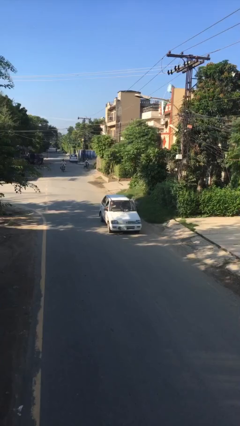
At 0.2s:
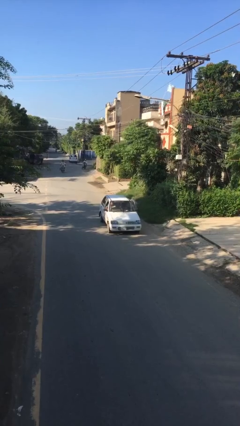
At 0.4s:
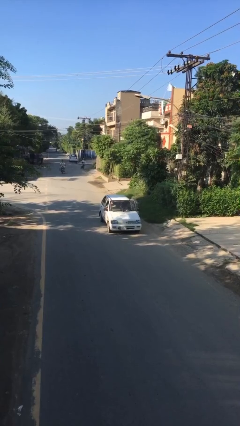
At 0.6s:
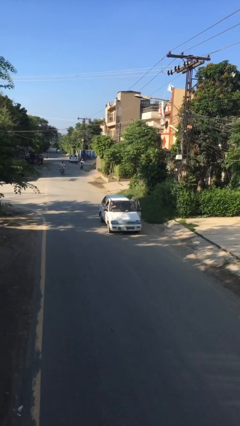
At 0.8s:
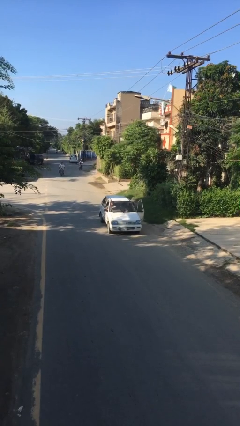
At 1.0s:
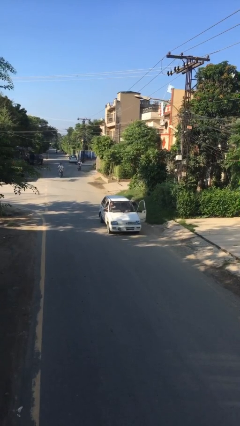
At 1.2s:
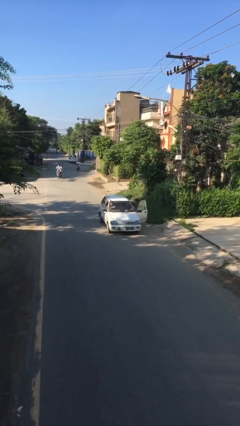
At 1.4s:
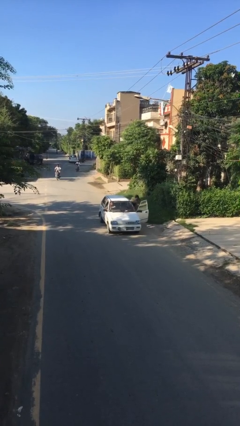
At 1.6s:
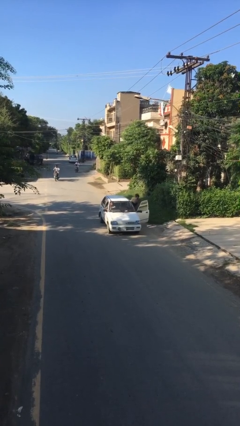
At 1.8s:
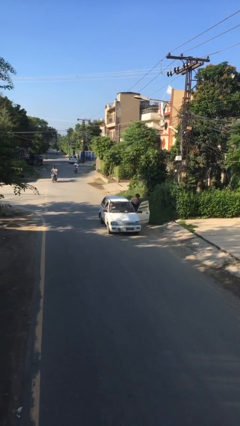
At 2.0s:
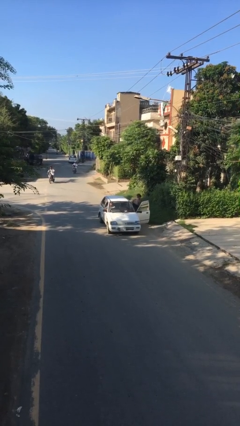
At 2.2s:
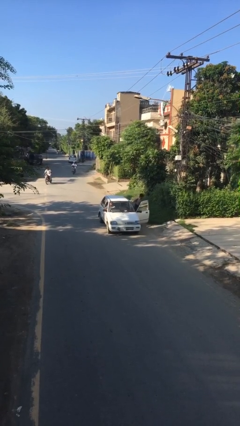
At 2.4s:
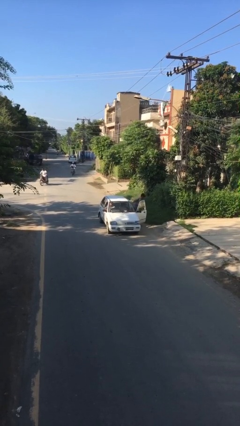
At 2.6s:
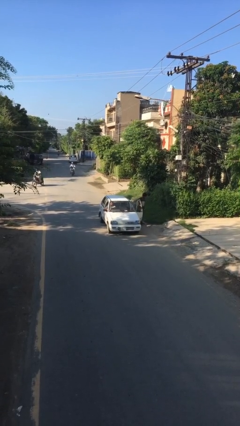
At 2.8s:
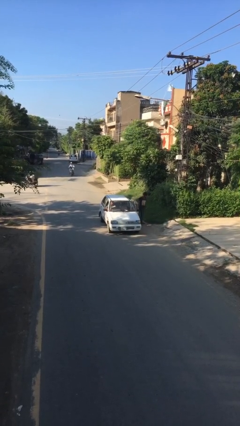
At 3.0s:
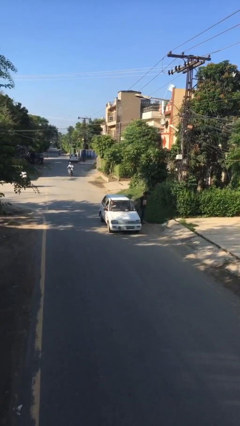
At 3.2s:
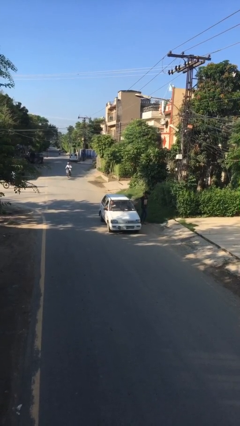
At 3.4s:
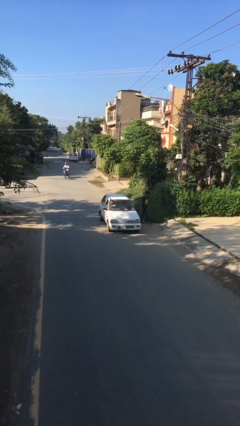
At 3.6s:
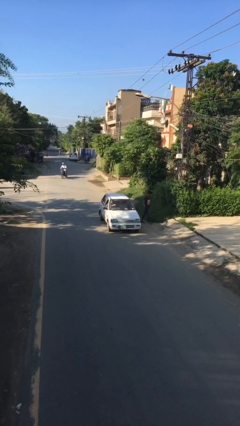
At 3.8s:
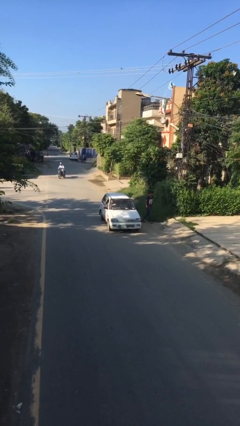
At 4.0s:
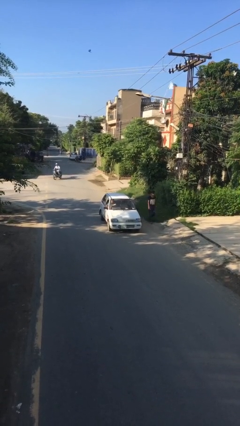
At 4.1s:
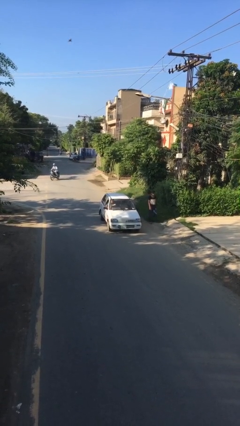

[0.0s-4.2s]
car drops off person

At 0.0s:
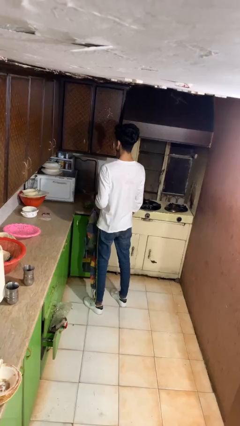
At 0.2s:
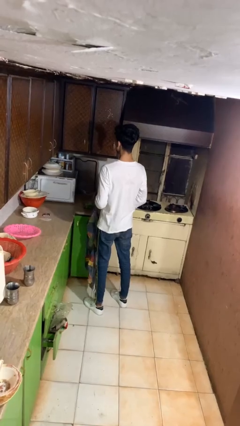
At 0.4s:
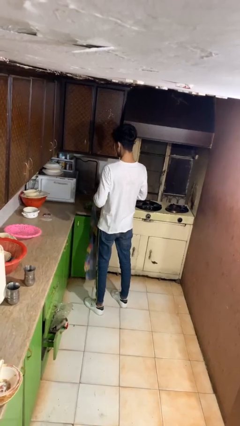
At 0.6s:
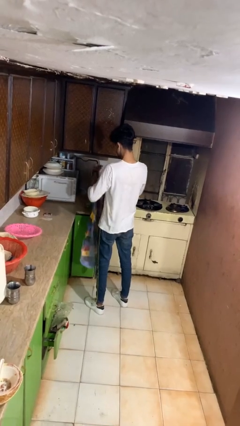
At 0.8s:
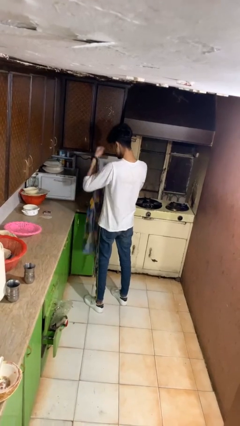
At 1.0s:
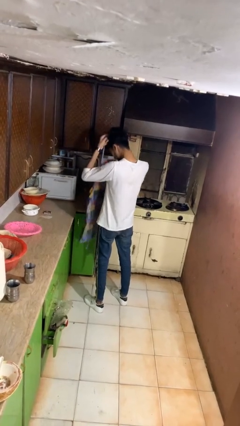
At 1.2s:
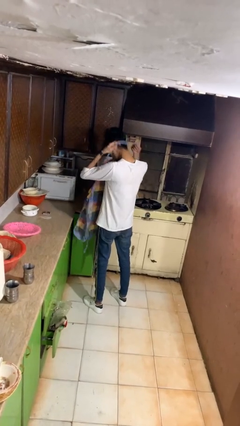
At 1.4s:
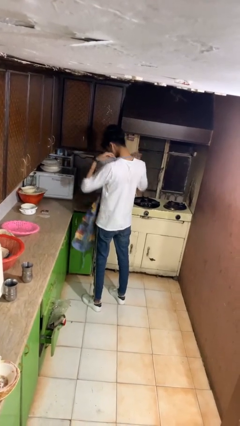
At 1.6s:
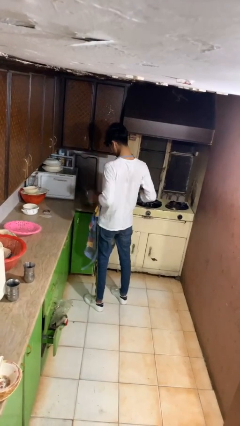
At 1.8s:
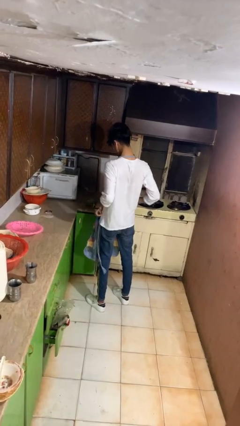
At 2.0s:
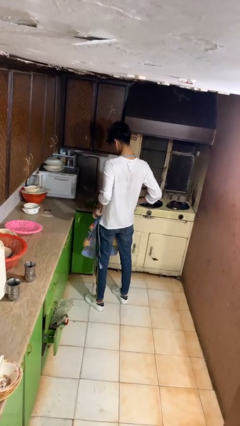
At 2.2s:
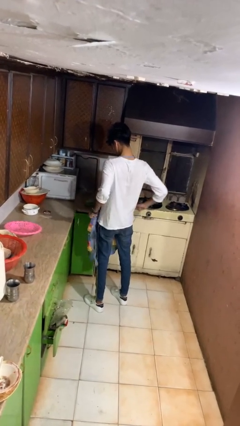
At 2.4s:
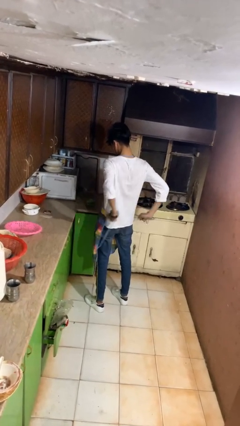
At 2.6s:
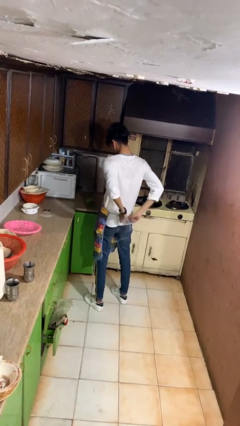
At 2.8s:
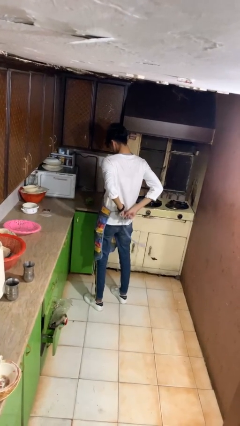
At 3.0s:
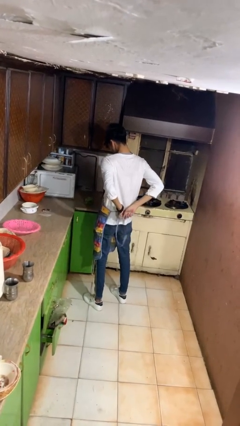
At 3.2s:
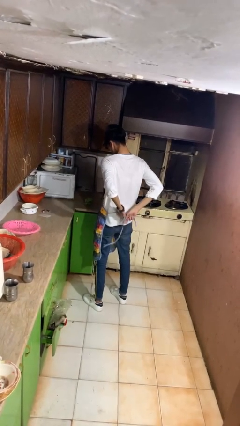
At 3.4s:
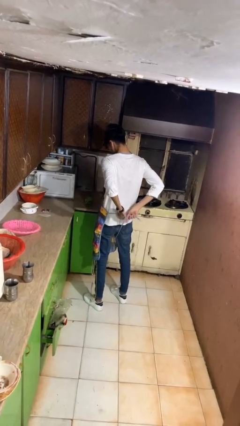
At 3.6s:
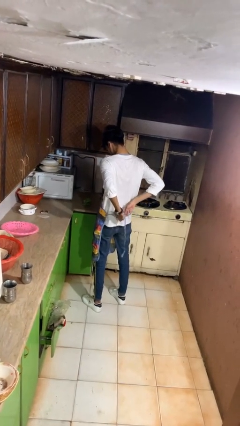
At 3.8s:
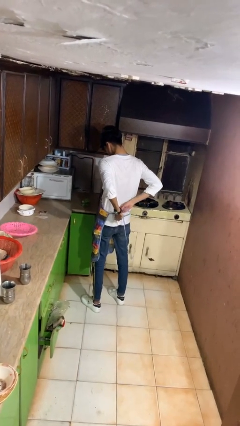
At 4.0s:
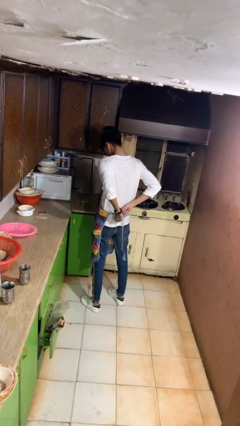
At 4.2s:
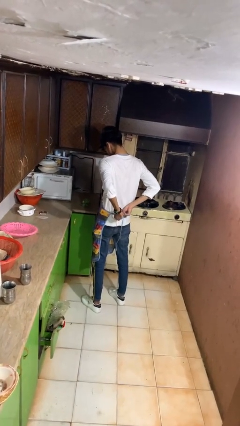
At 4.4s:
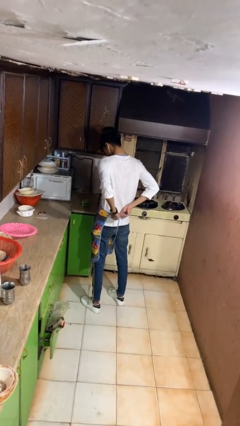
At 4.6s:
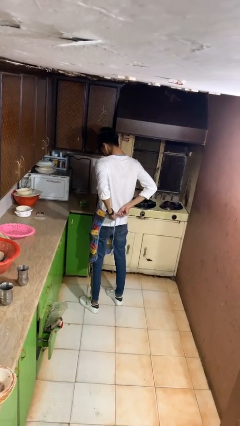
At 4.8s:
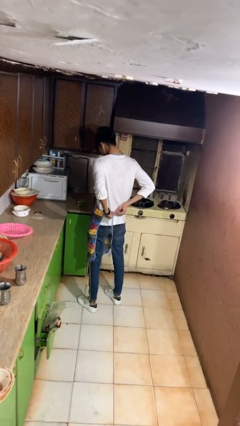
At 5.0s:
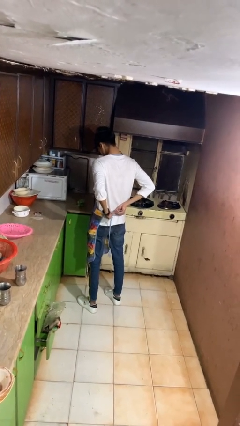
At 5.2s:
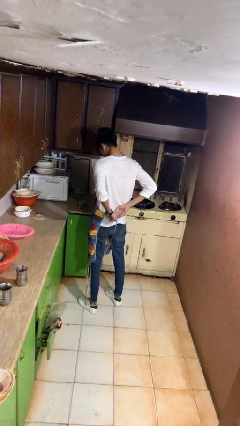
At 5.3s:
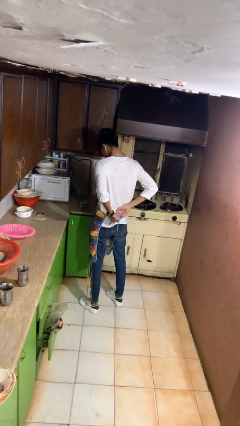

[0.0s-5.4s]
person puts on apron

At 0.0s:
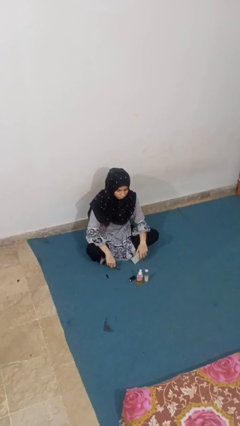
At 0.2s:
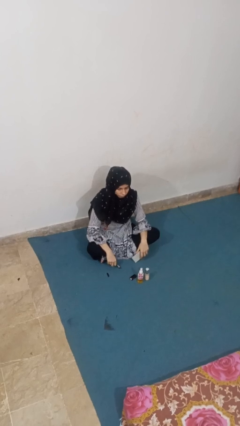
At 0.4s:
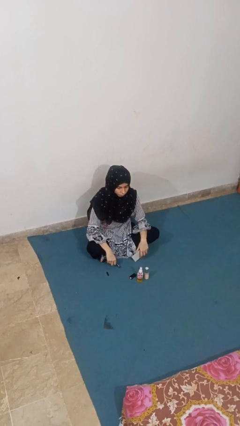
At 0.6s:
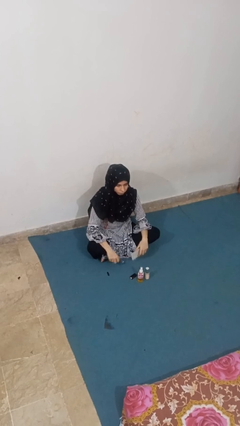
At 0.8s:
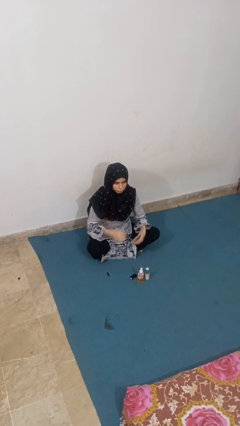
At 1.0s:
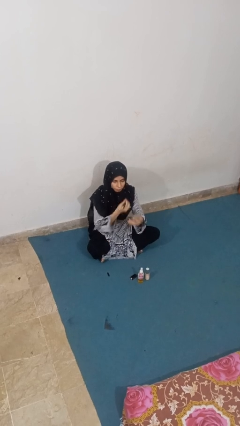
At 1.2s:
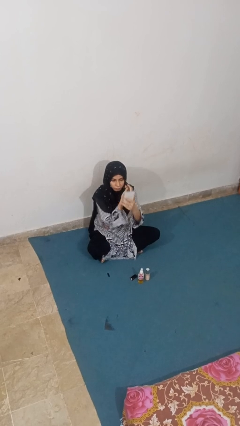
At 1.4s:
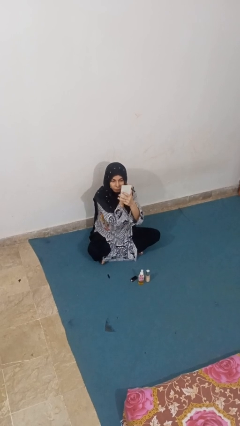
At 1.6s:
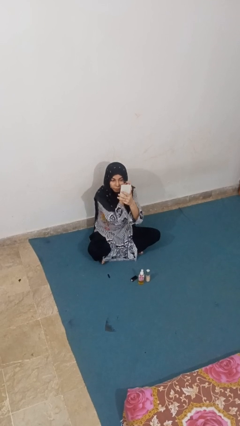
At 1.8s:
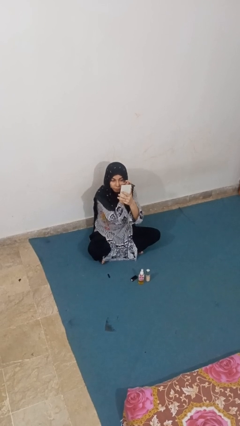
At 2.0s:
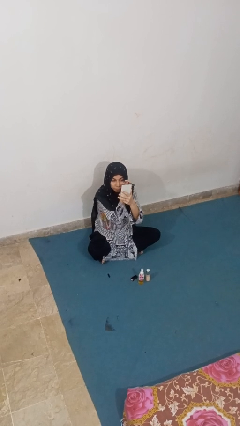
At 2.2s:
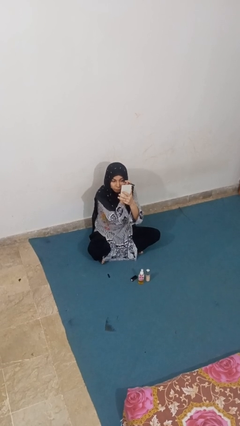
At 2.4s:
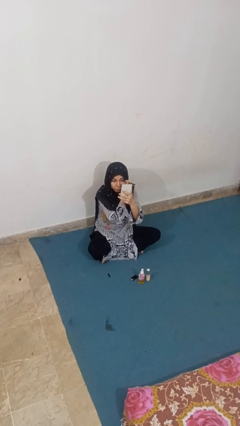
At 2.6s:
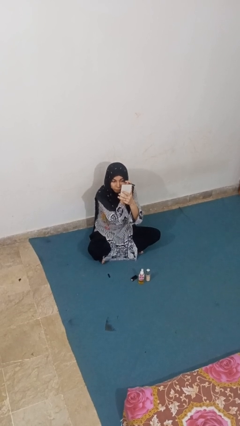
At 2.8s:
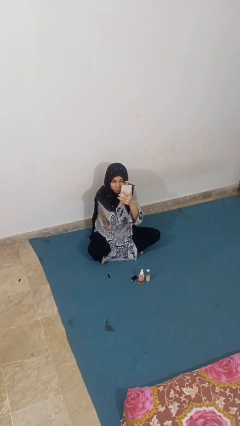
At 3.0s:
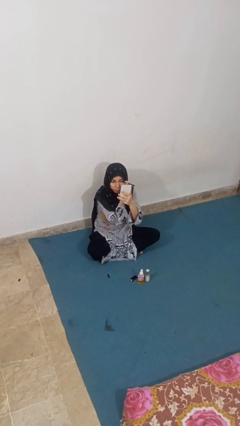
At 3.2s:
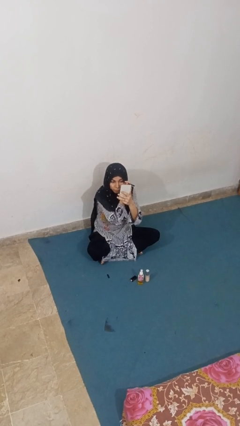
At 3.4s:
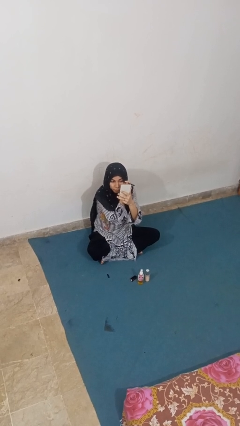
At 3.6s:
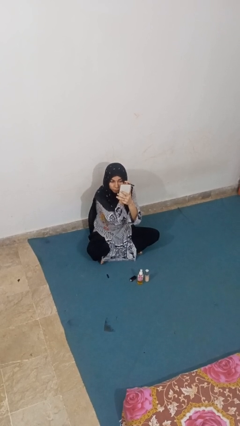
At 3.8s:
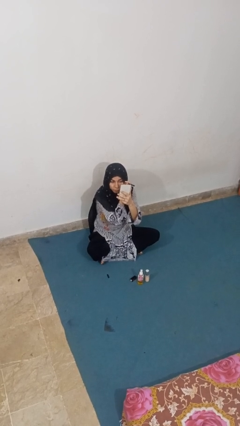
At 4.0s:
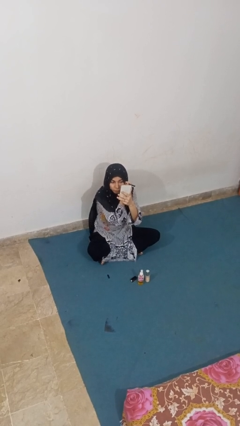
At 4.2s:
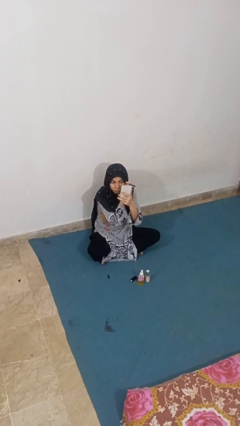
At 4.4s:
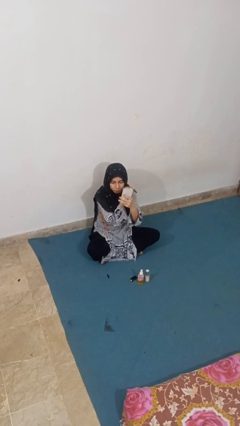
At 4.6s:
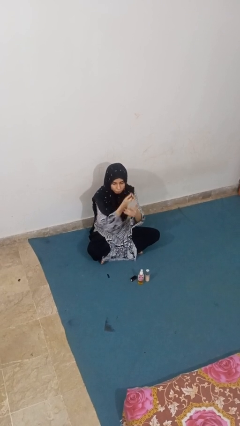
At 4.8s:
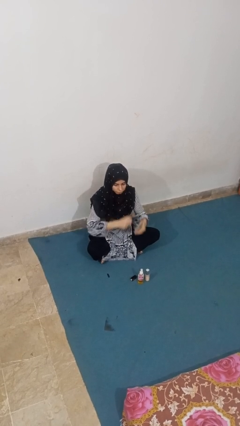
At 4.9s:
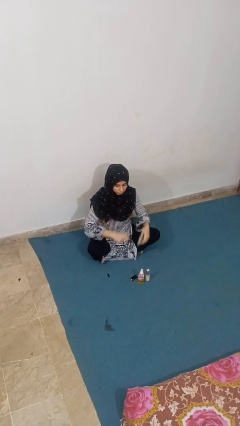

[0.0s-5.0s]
person applies eye makeup

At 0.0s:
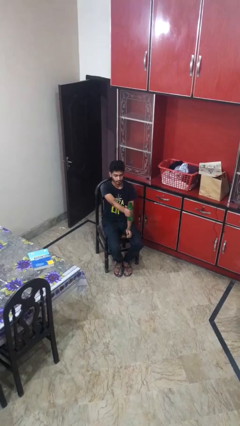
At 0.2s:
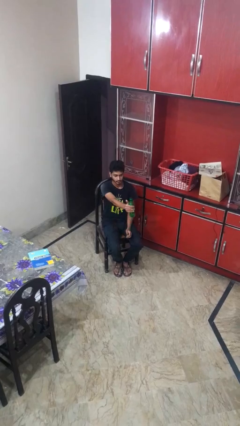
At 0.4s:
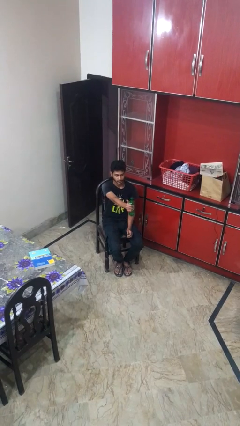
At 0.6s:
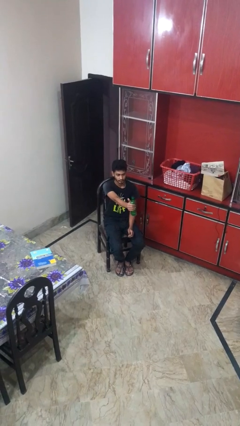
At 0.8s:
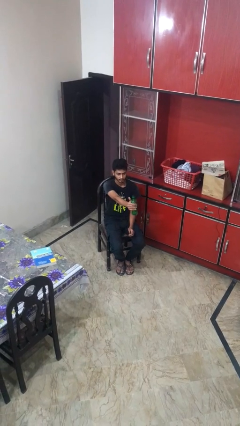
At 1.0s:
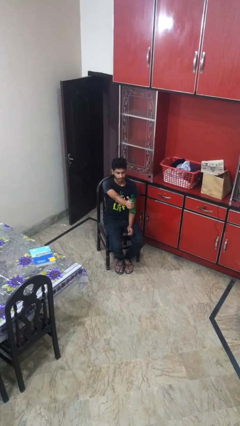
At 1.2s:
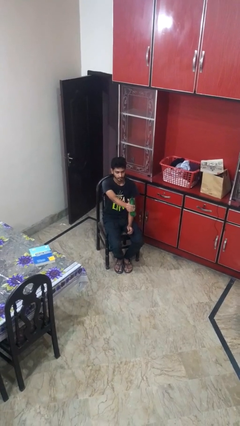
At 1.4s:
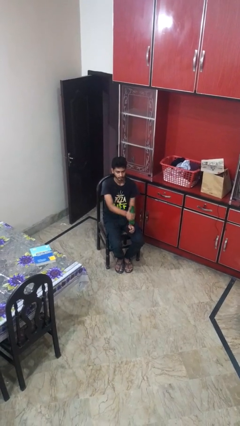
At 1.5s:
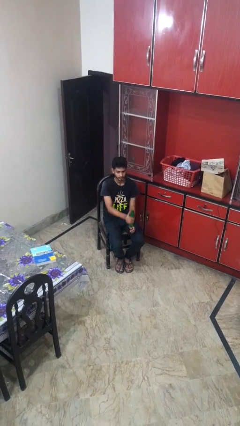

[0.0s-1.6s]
person squeezes object

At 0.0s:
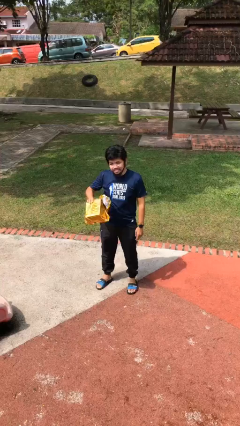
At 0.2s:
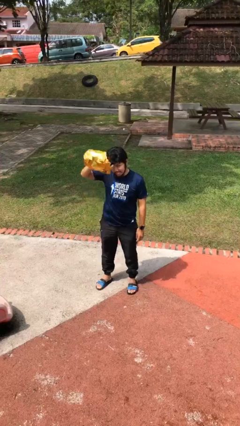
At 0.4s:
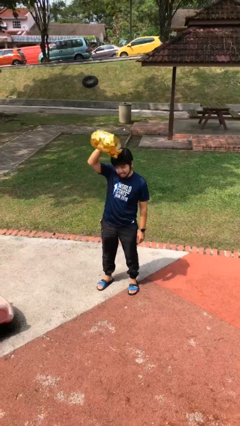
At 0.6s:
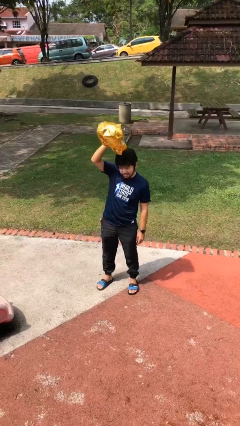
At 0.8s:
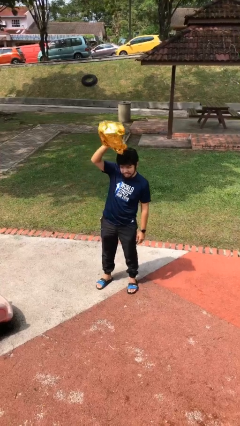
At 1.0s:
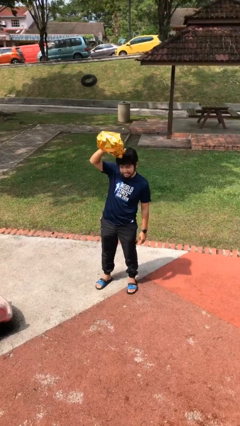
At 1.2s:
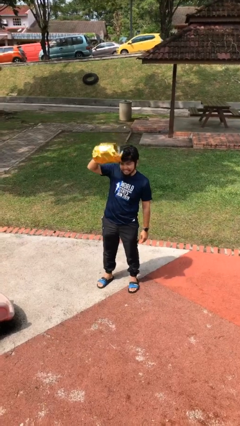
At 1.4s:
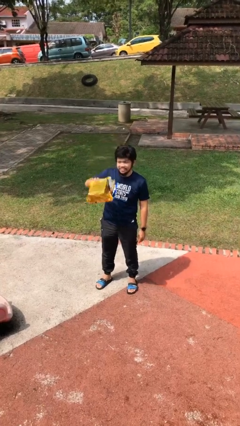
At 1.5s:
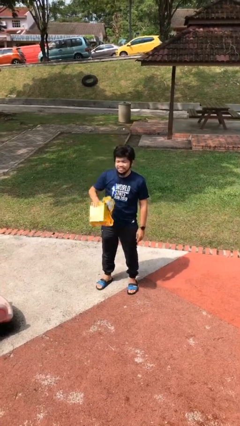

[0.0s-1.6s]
person holds object above head
